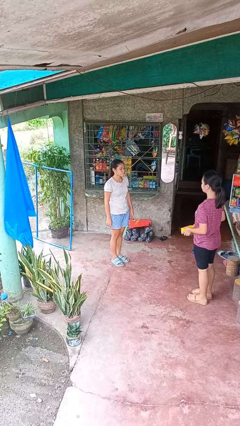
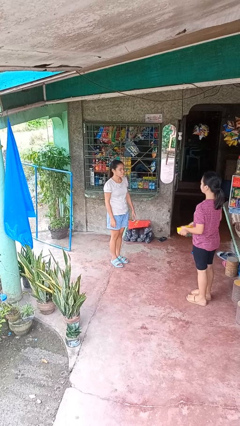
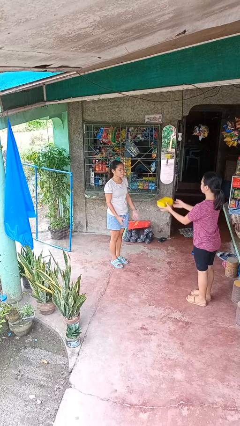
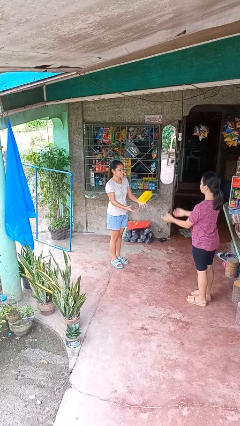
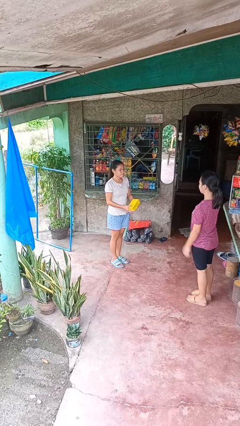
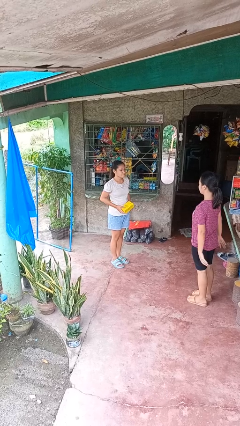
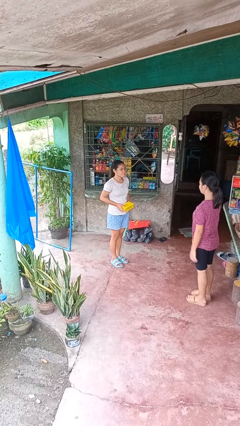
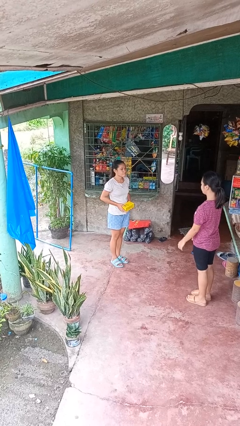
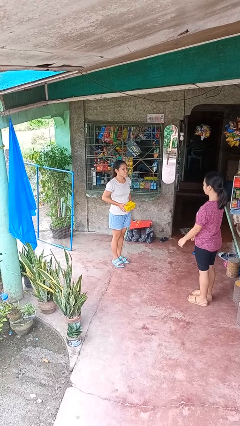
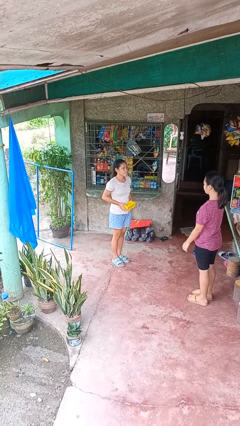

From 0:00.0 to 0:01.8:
person catches object from person

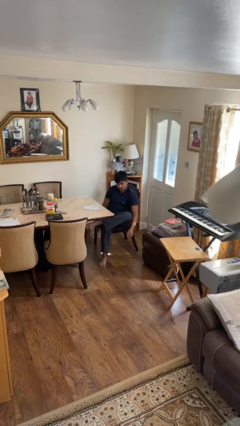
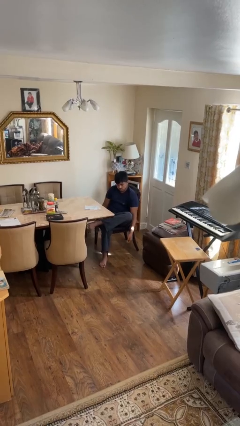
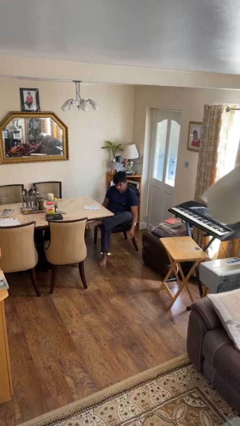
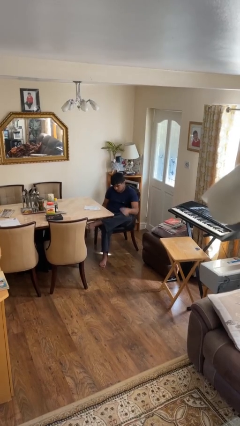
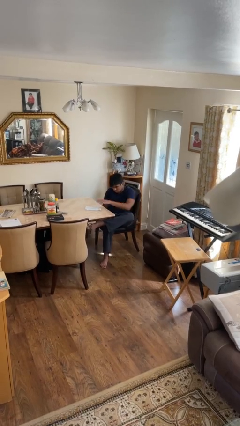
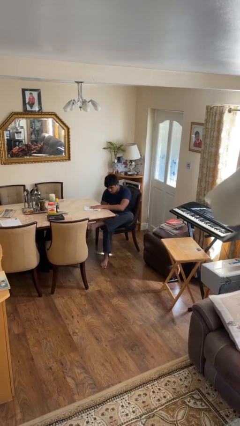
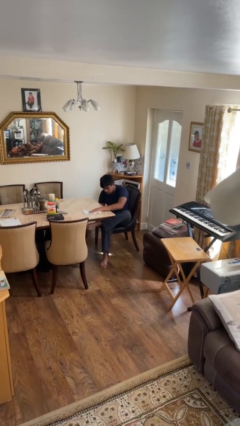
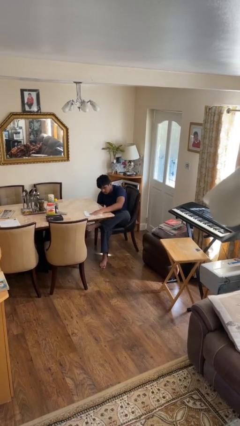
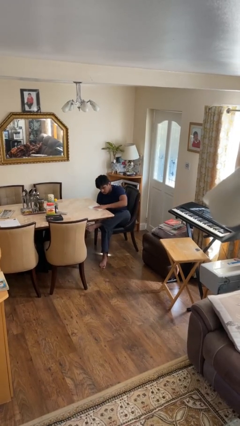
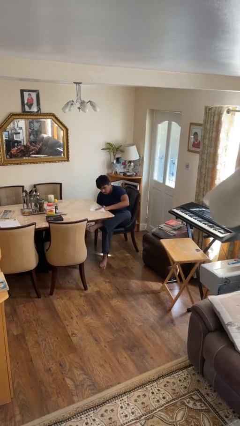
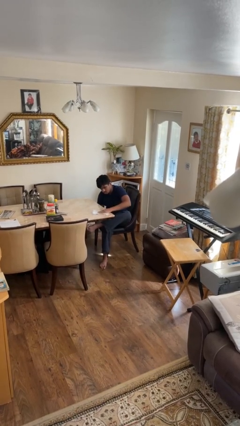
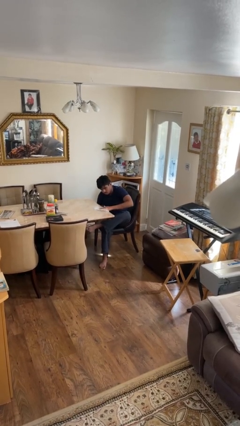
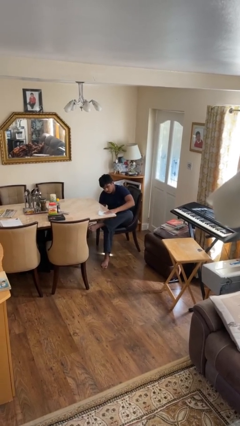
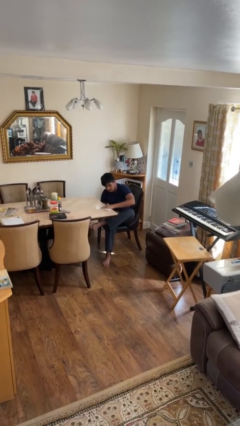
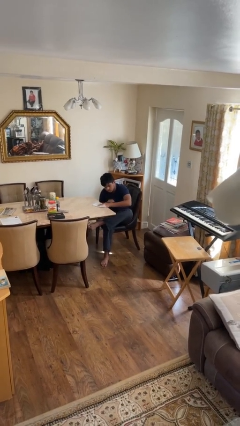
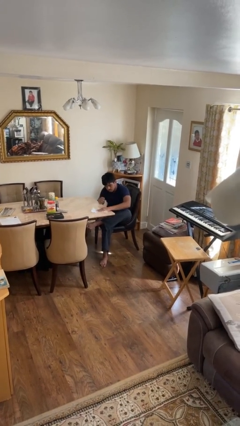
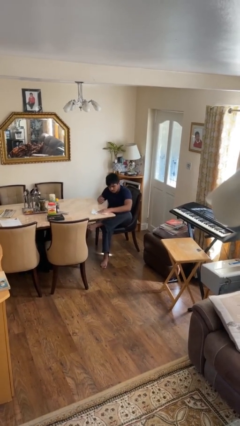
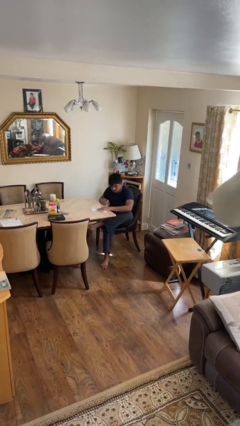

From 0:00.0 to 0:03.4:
person cleans table with rag

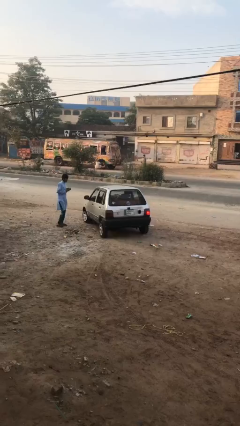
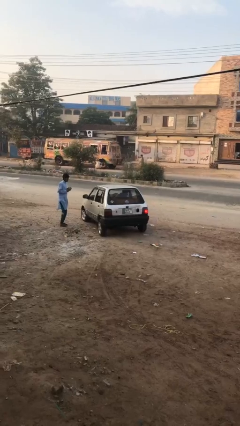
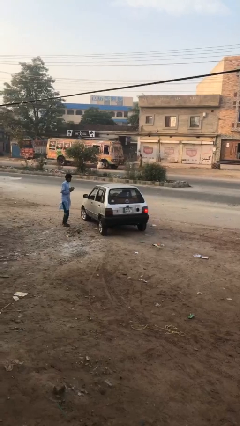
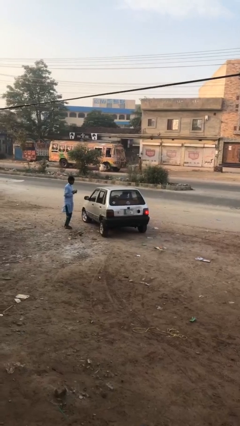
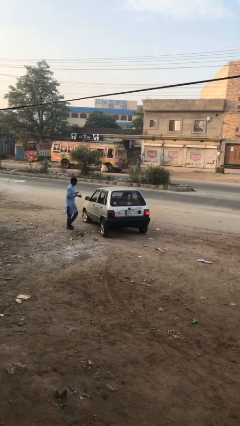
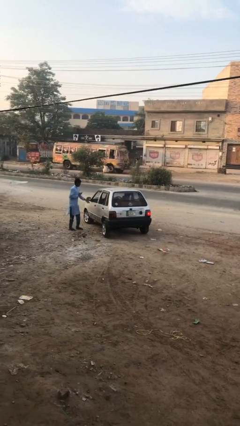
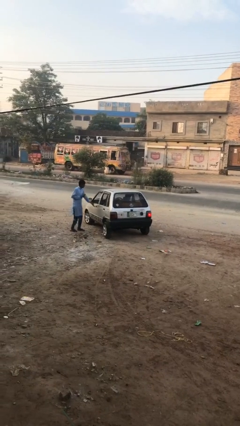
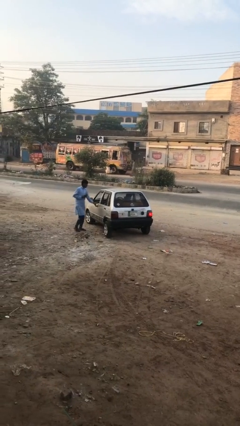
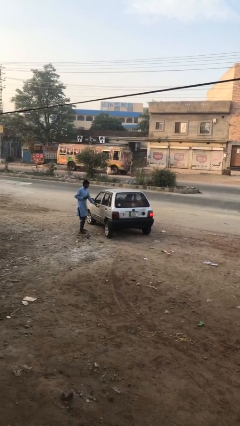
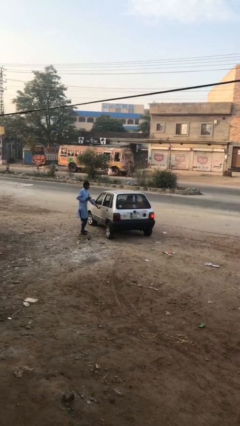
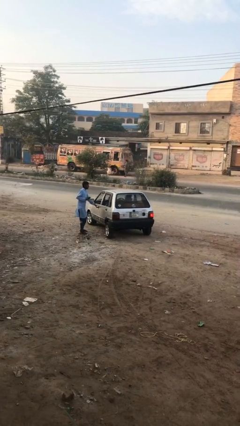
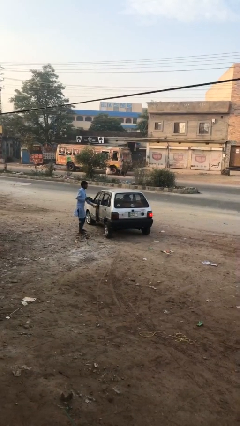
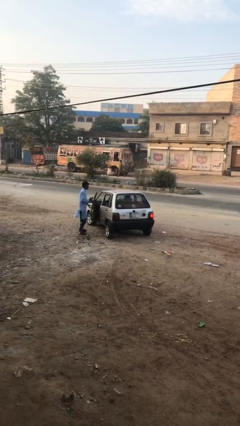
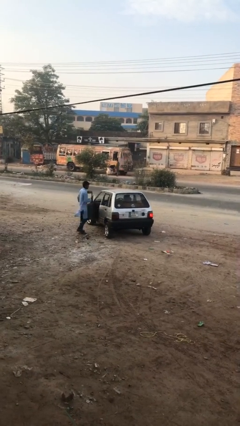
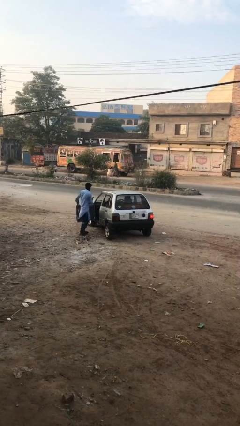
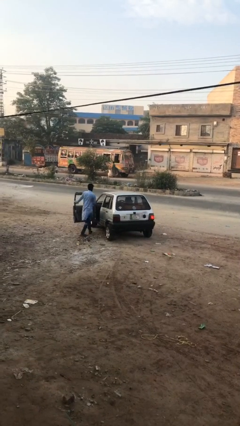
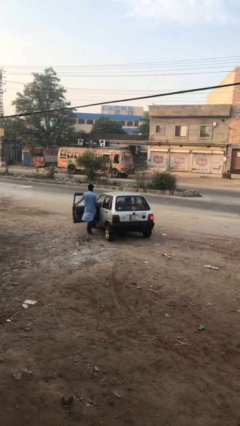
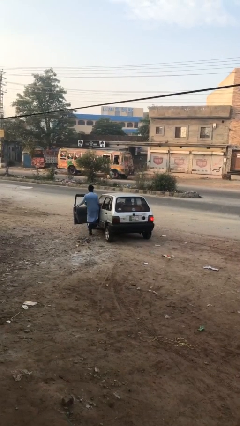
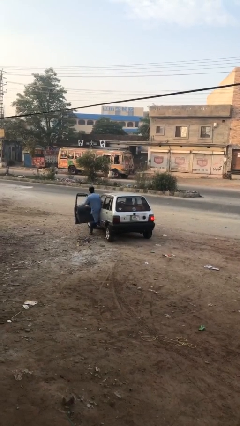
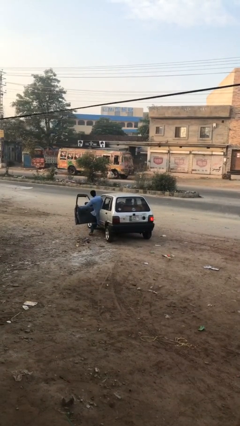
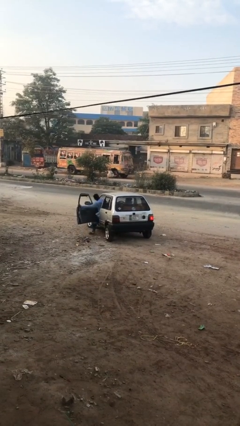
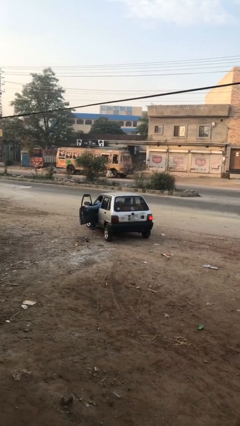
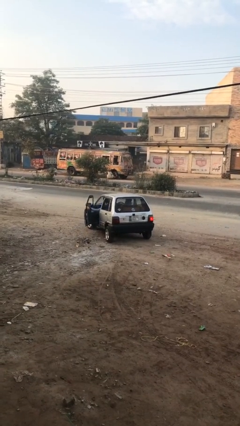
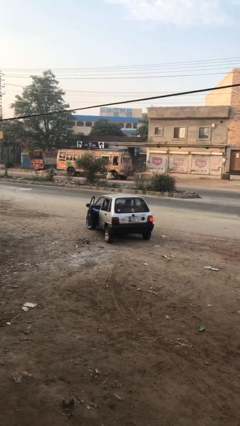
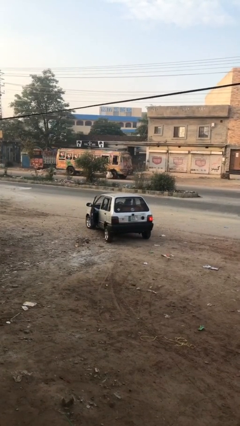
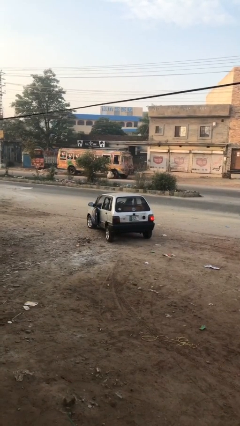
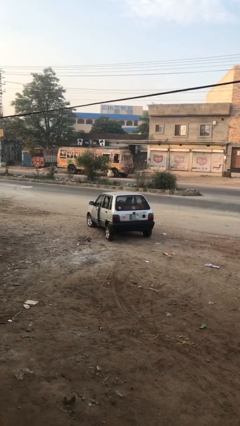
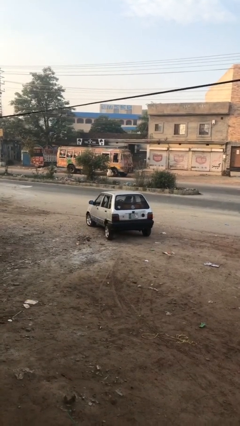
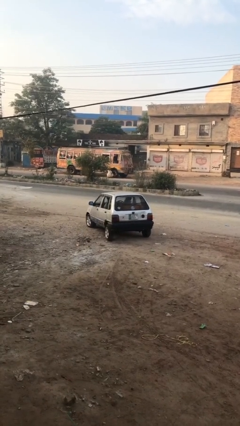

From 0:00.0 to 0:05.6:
car picks up person

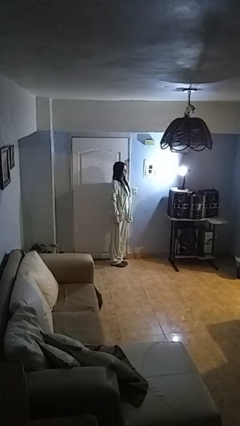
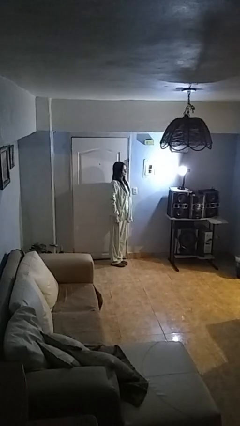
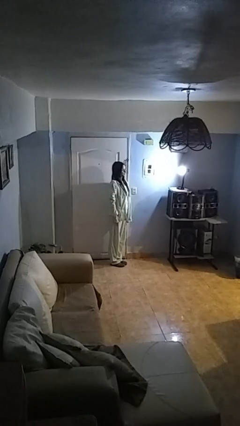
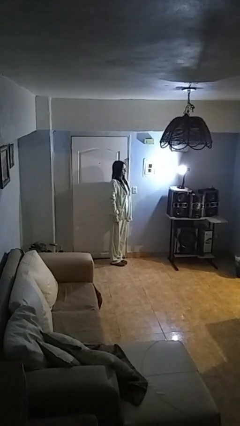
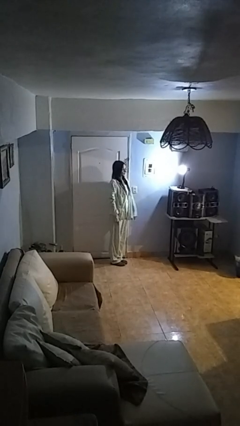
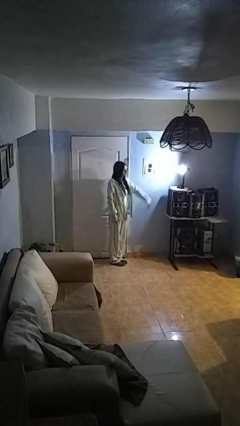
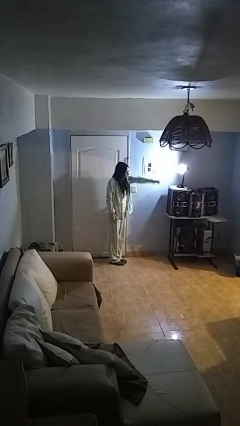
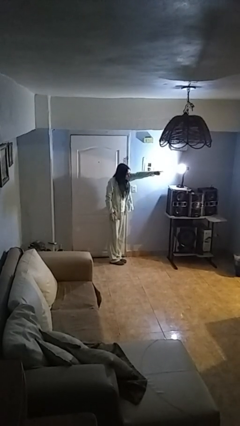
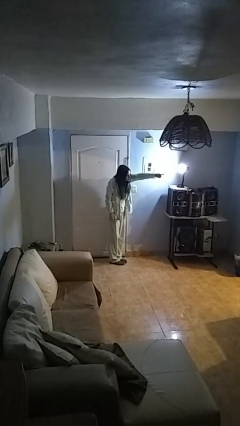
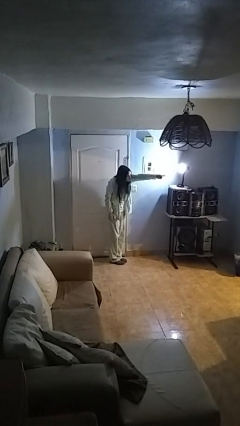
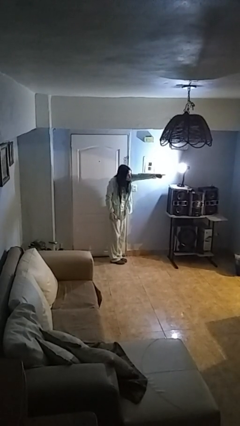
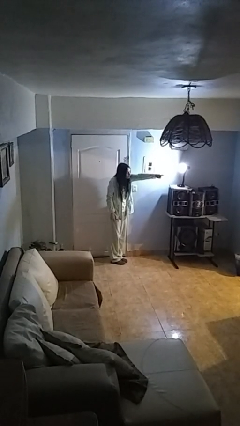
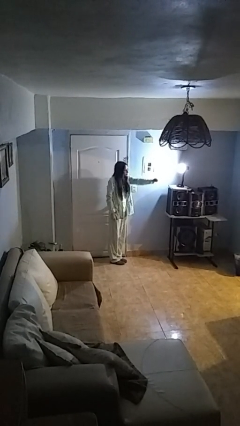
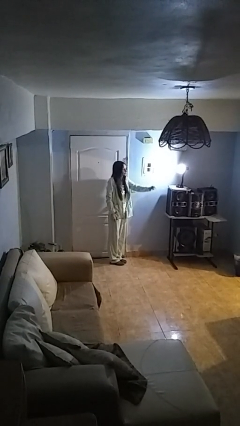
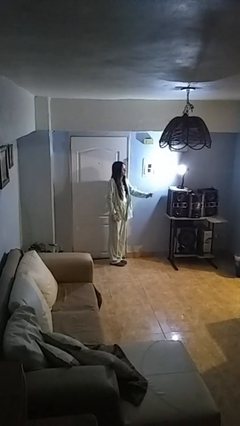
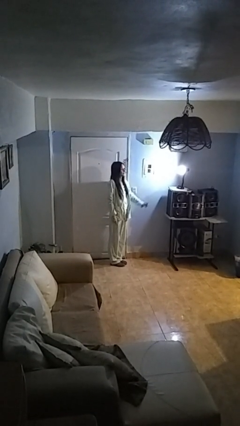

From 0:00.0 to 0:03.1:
person points at person

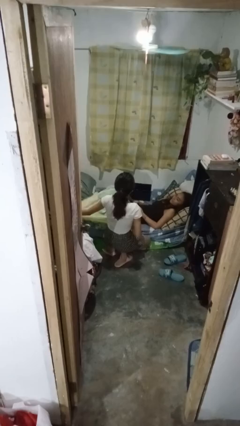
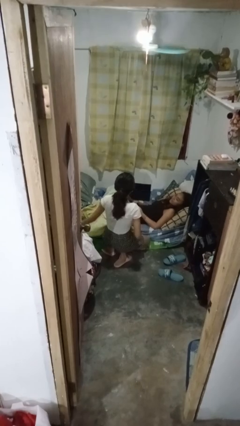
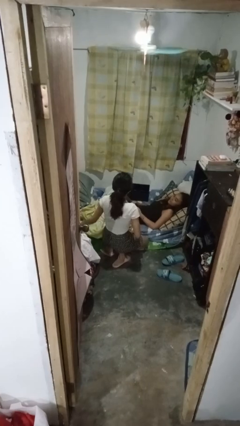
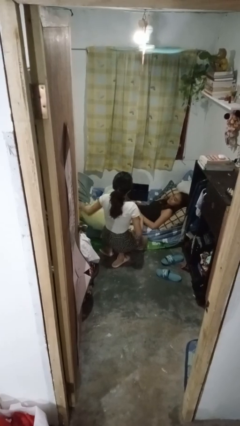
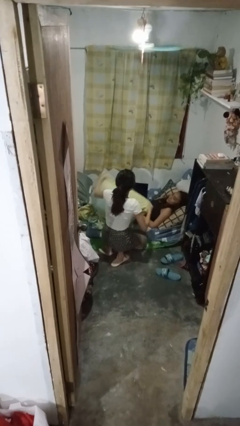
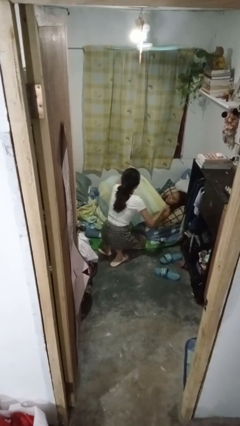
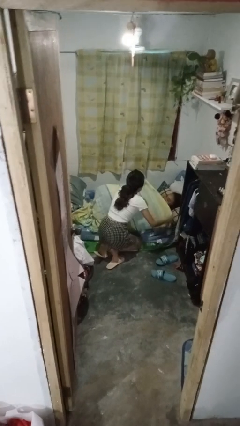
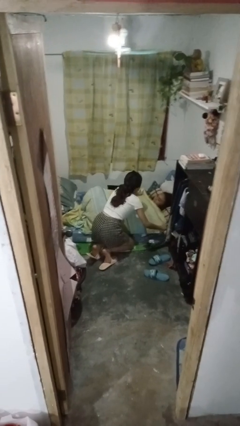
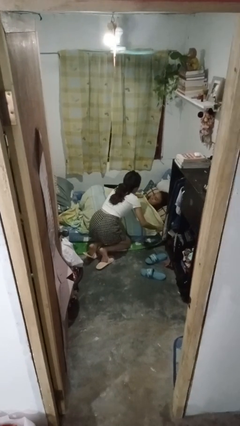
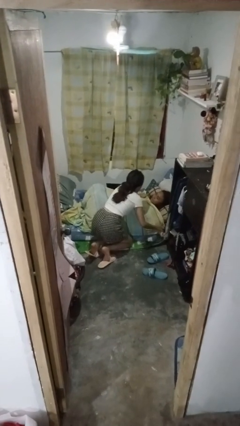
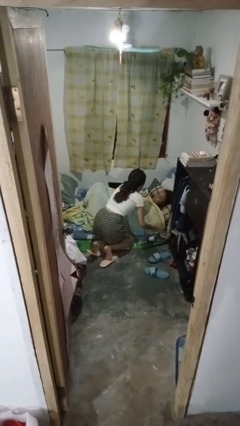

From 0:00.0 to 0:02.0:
person covers friend with blanket

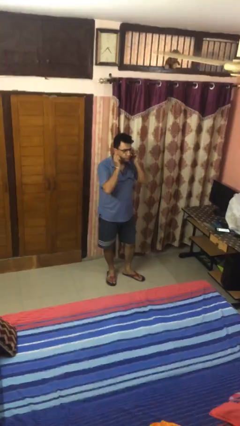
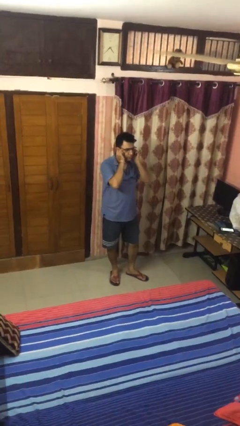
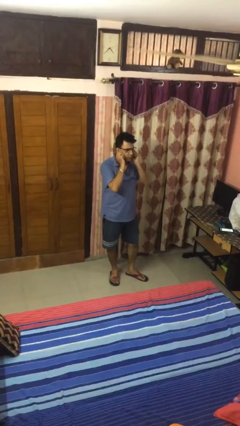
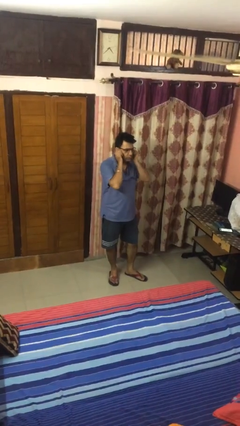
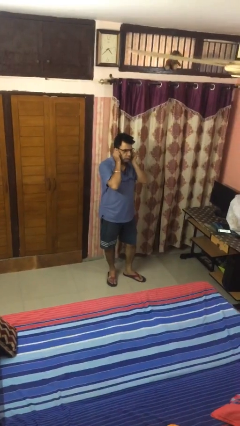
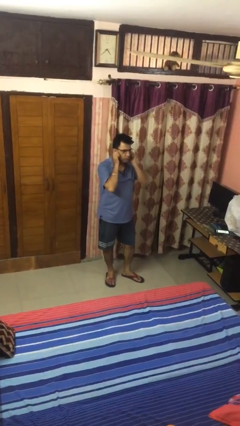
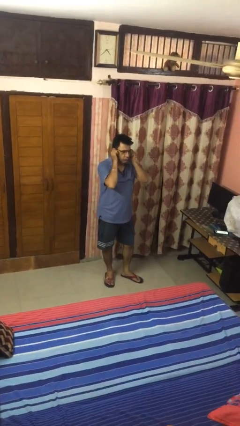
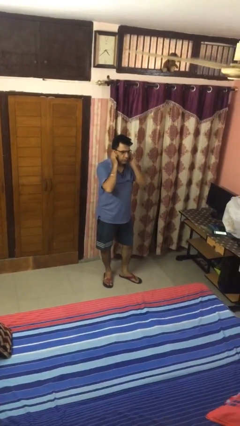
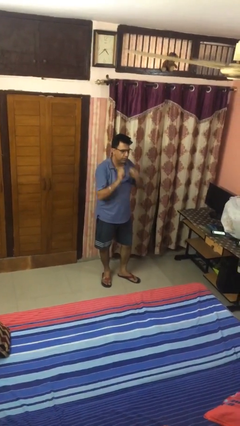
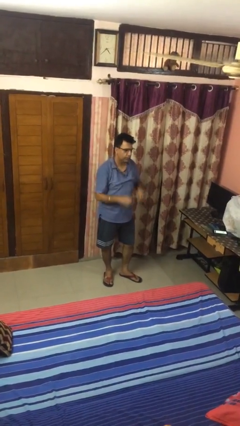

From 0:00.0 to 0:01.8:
person touches earlobe
